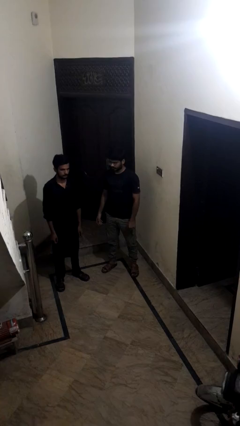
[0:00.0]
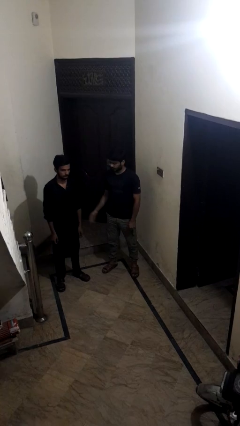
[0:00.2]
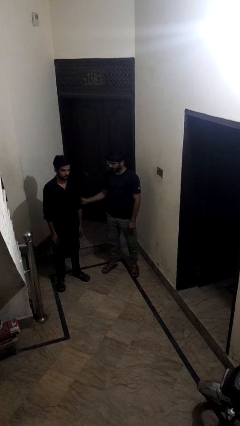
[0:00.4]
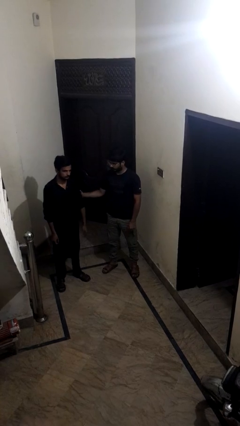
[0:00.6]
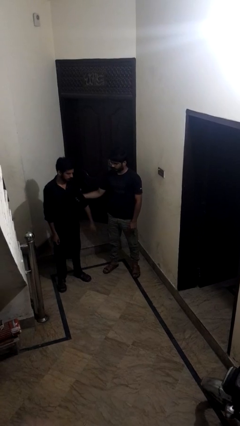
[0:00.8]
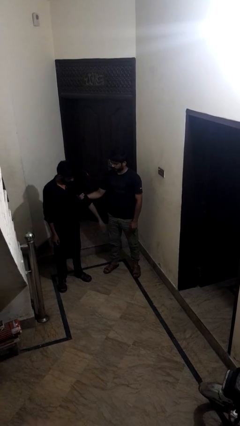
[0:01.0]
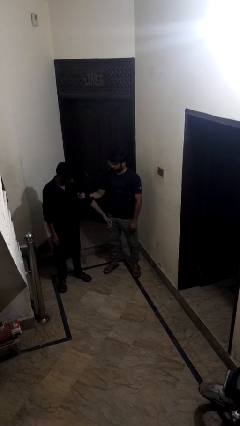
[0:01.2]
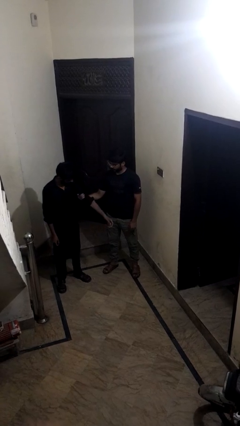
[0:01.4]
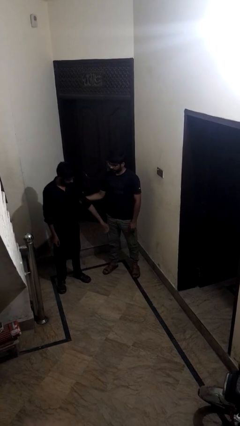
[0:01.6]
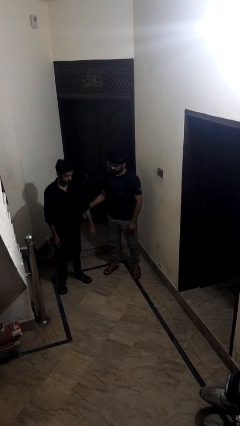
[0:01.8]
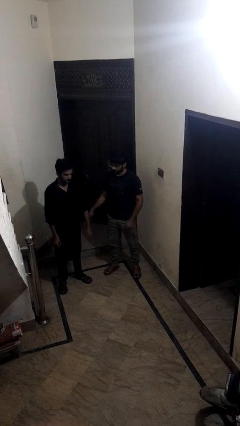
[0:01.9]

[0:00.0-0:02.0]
person grabs person by bicep

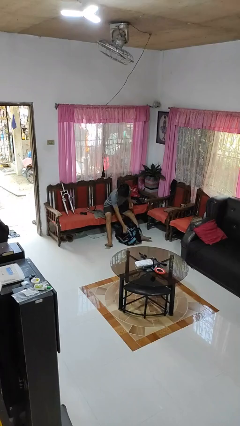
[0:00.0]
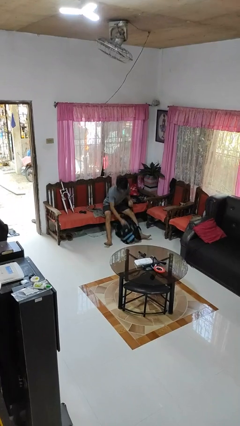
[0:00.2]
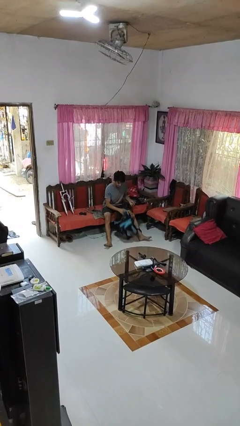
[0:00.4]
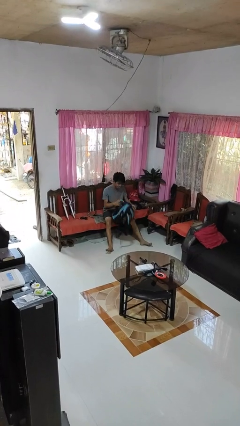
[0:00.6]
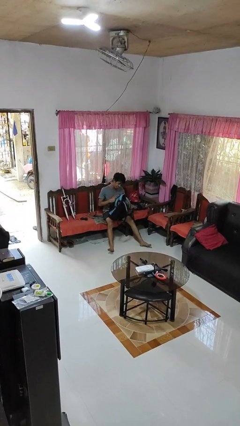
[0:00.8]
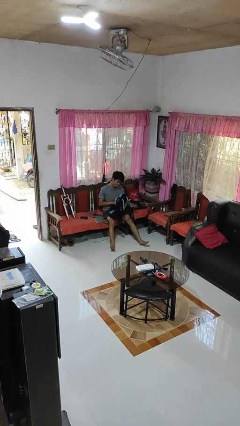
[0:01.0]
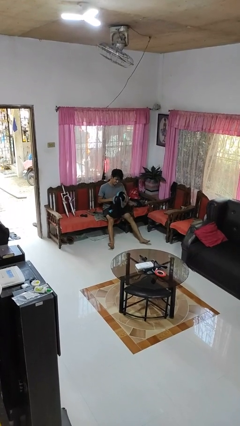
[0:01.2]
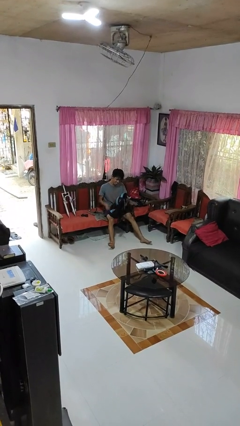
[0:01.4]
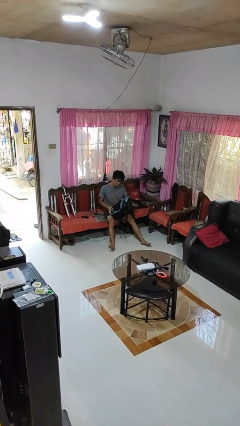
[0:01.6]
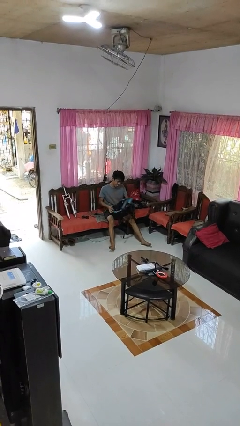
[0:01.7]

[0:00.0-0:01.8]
person picks up object from floor

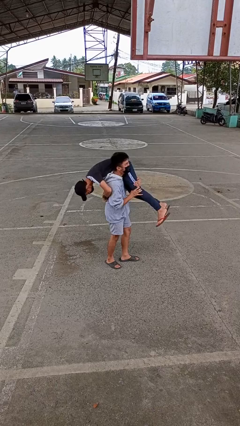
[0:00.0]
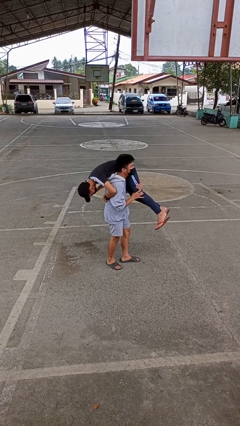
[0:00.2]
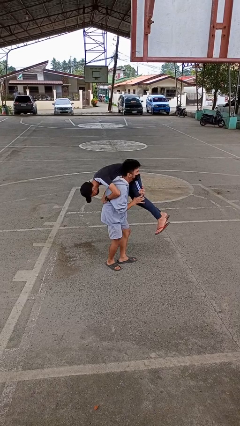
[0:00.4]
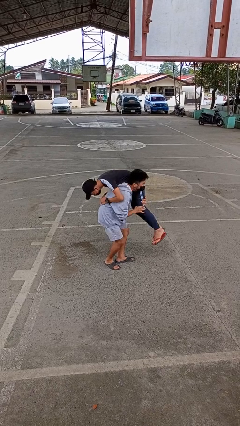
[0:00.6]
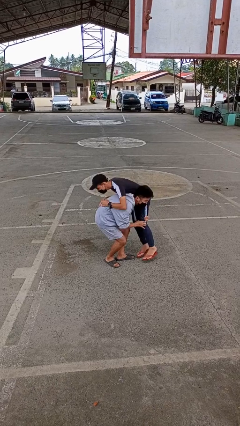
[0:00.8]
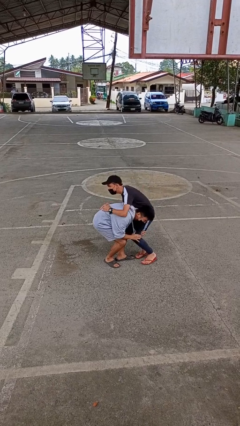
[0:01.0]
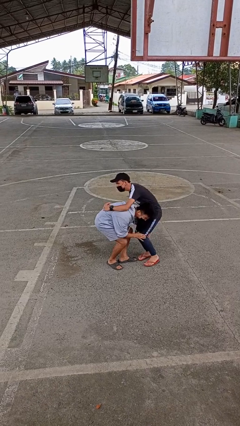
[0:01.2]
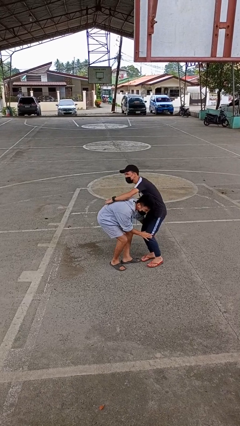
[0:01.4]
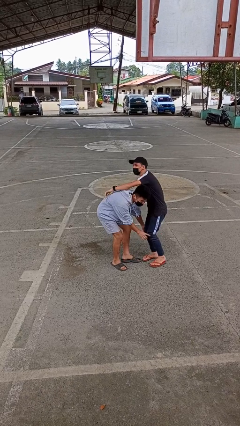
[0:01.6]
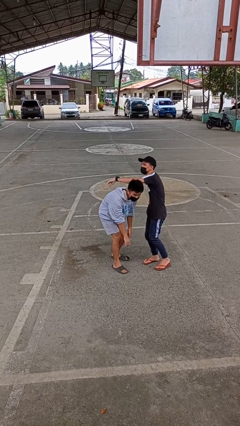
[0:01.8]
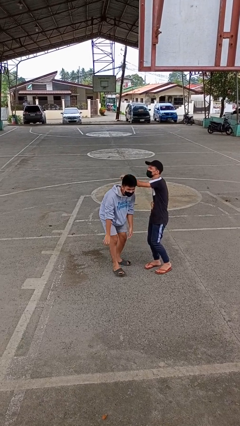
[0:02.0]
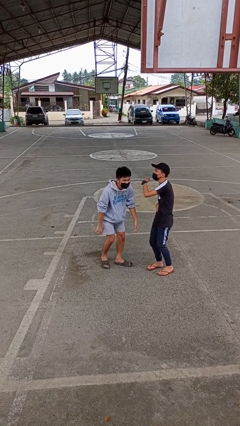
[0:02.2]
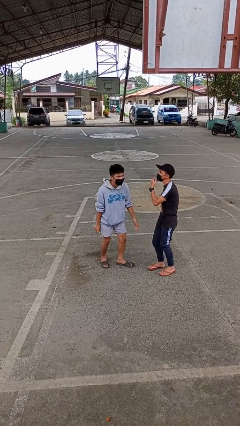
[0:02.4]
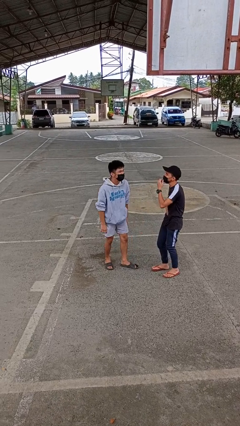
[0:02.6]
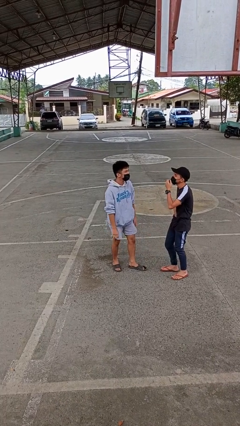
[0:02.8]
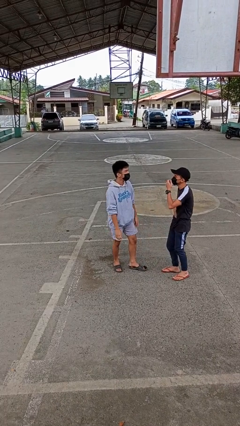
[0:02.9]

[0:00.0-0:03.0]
person puts down person

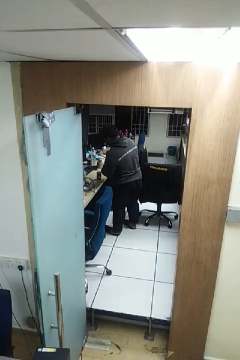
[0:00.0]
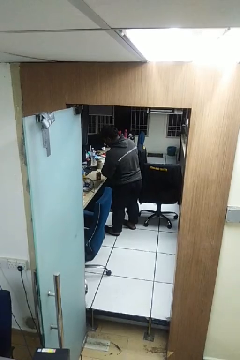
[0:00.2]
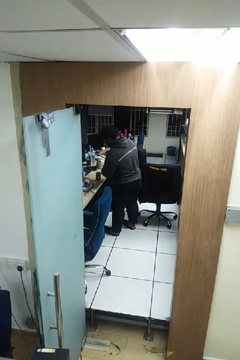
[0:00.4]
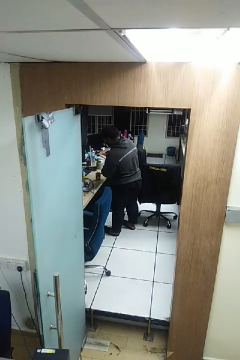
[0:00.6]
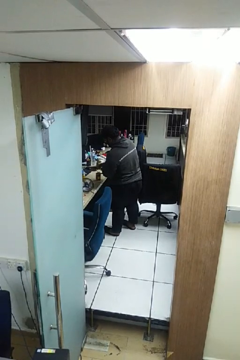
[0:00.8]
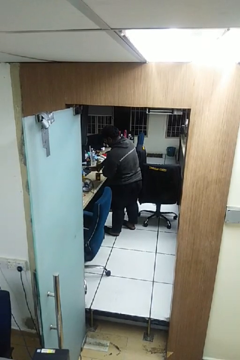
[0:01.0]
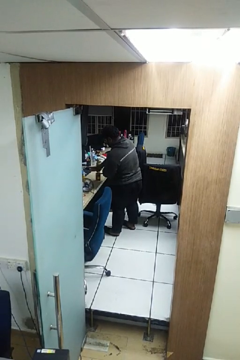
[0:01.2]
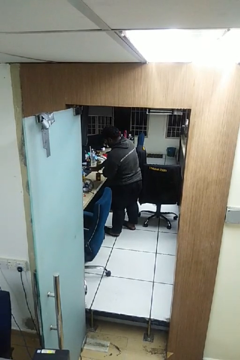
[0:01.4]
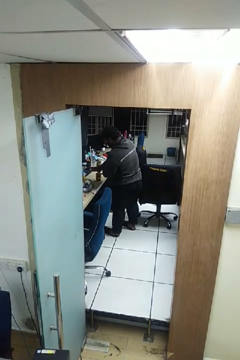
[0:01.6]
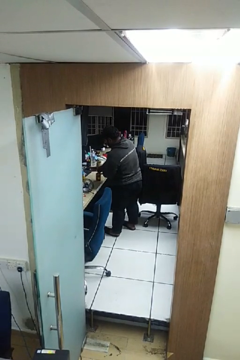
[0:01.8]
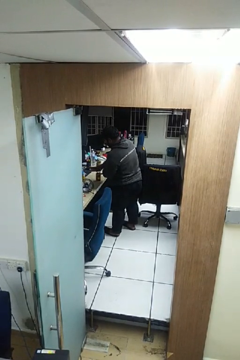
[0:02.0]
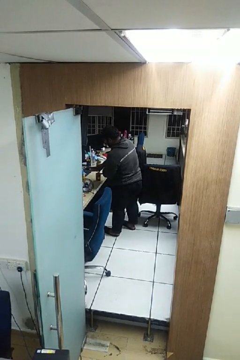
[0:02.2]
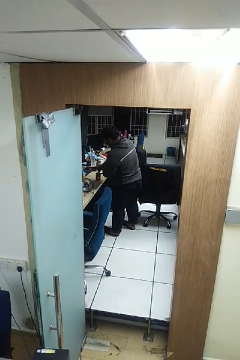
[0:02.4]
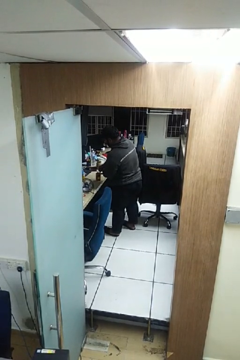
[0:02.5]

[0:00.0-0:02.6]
person opens can with can opener

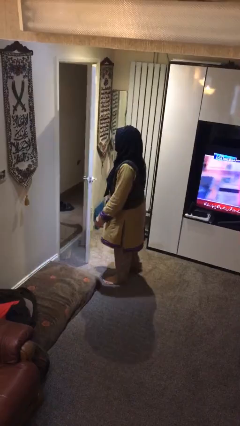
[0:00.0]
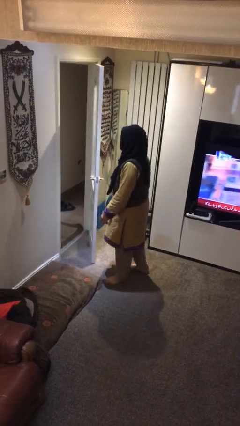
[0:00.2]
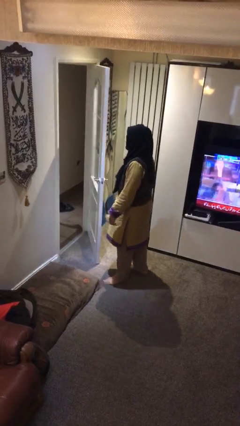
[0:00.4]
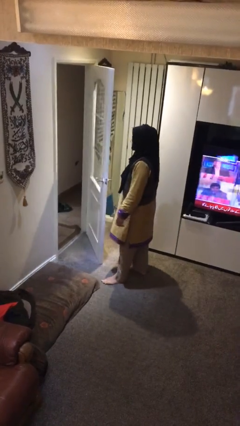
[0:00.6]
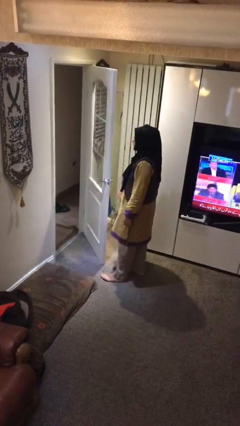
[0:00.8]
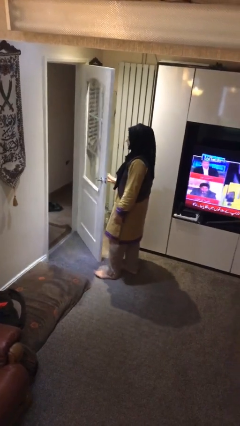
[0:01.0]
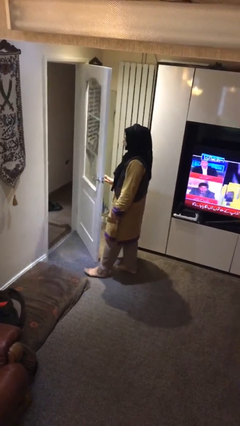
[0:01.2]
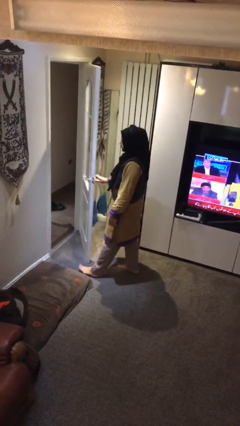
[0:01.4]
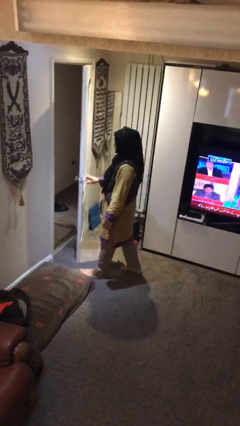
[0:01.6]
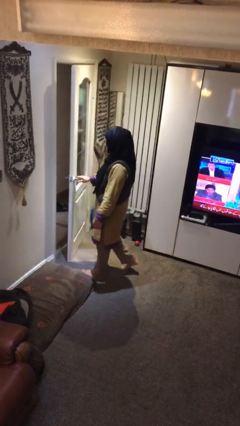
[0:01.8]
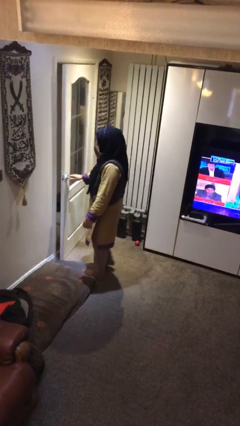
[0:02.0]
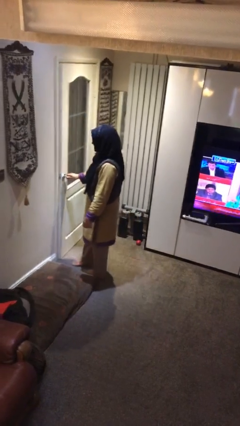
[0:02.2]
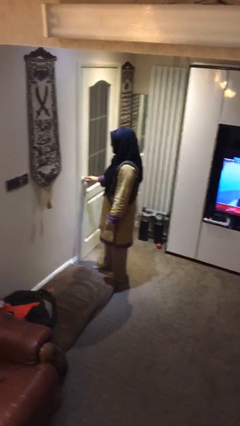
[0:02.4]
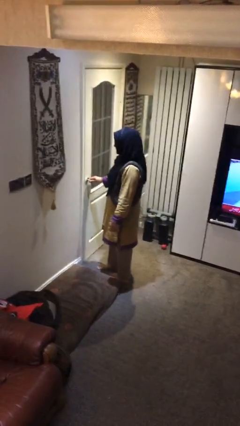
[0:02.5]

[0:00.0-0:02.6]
person closes facility door

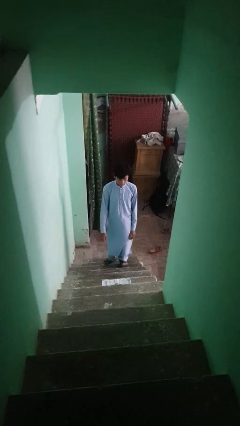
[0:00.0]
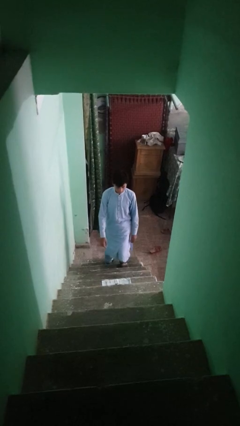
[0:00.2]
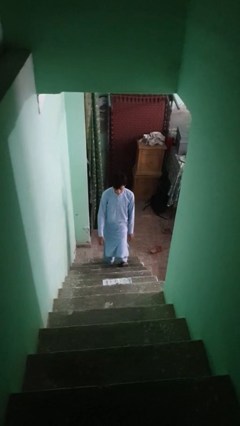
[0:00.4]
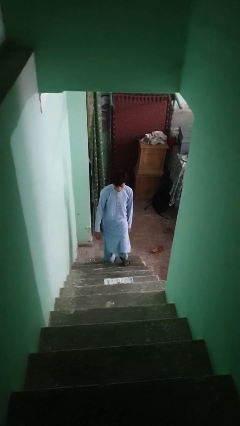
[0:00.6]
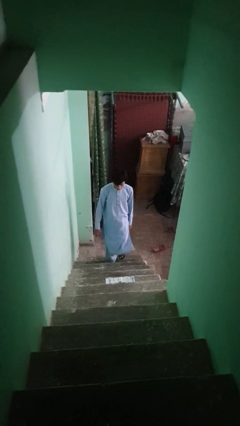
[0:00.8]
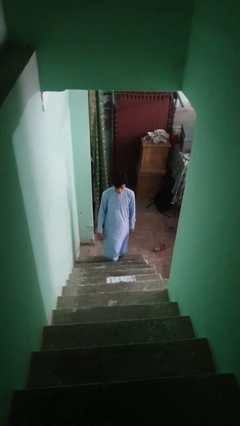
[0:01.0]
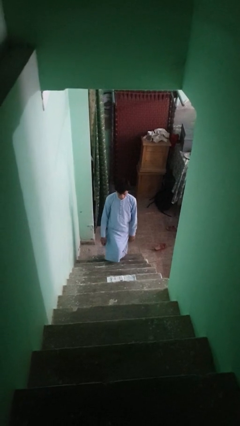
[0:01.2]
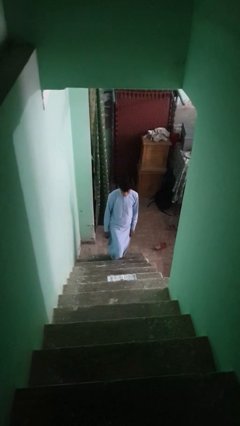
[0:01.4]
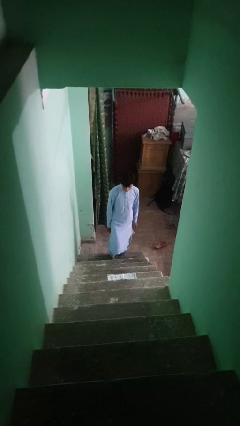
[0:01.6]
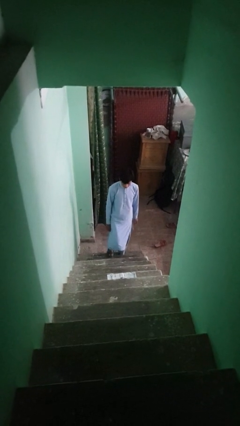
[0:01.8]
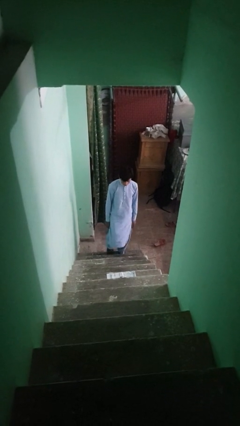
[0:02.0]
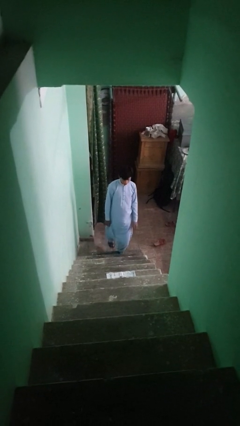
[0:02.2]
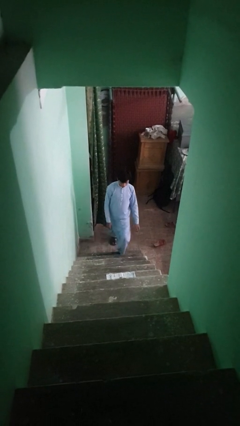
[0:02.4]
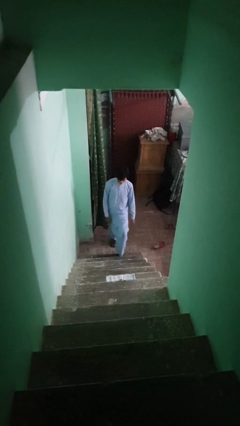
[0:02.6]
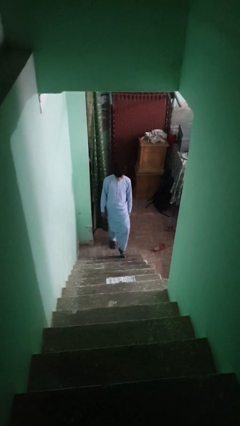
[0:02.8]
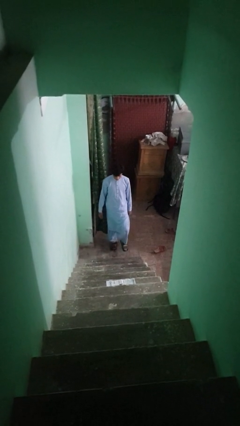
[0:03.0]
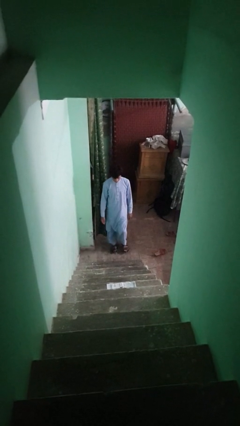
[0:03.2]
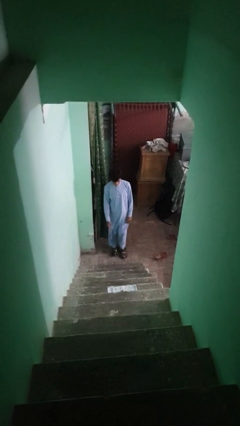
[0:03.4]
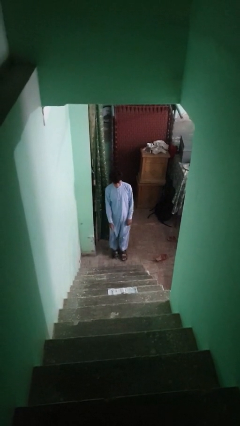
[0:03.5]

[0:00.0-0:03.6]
person climbs down stairs

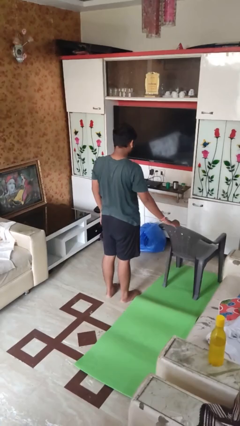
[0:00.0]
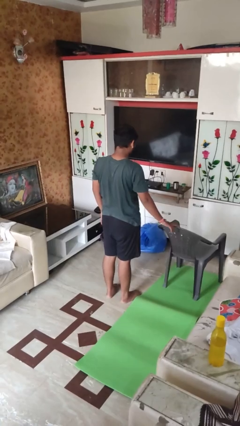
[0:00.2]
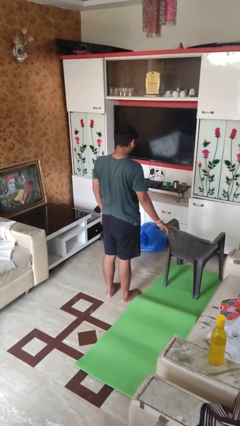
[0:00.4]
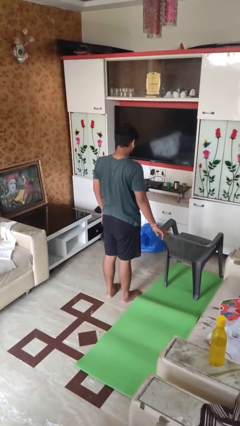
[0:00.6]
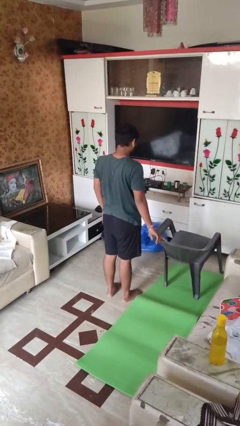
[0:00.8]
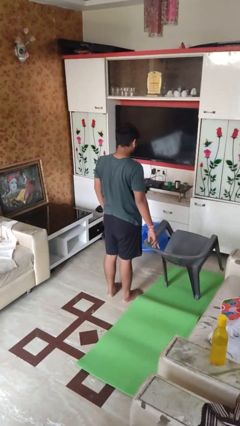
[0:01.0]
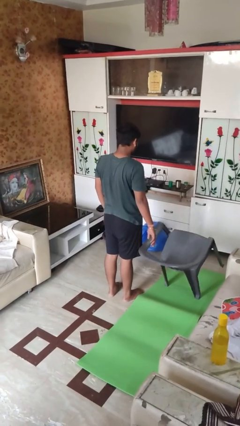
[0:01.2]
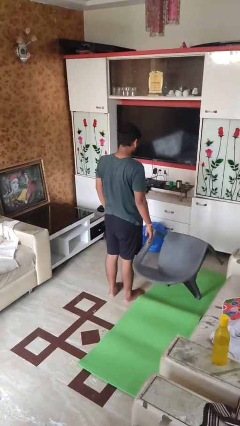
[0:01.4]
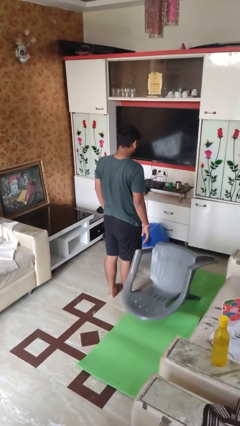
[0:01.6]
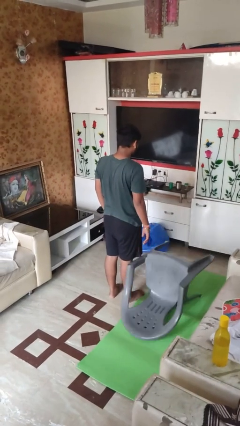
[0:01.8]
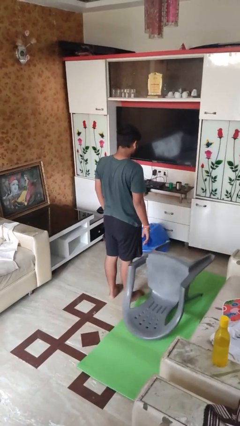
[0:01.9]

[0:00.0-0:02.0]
person knocks over furniture
